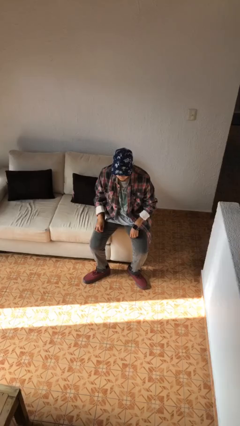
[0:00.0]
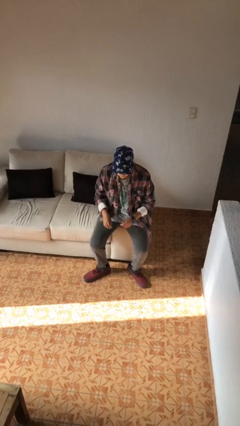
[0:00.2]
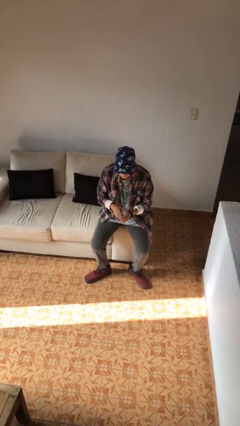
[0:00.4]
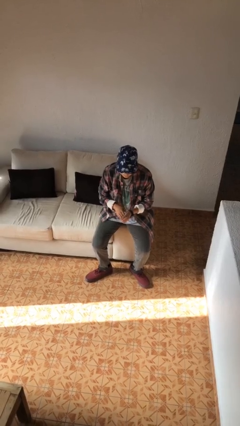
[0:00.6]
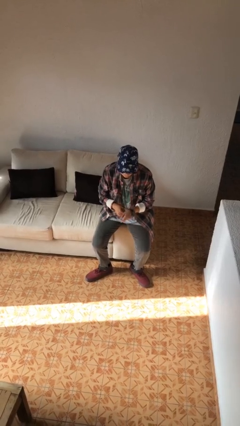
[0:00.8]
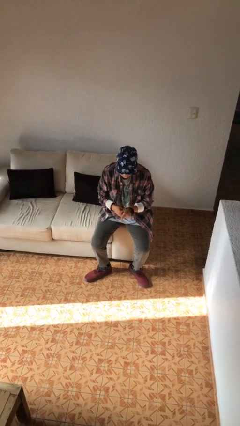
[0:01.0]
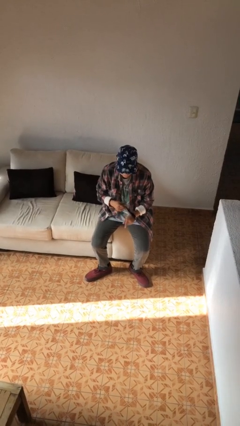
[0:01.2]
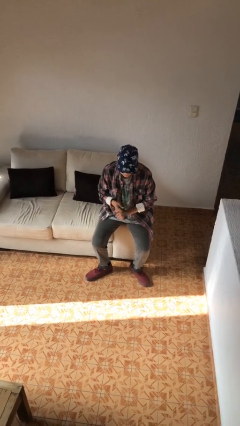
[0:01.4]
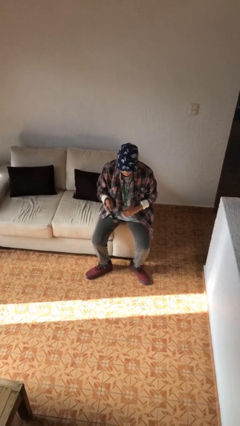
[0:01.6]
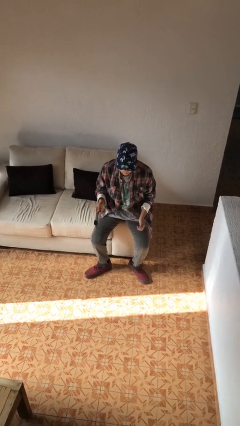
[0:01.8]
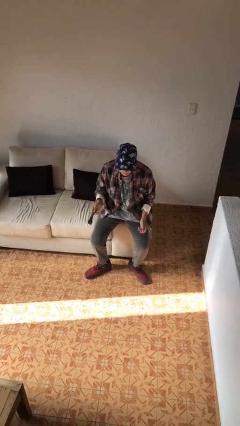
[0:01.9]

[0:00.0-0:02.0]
person takes off wristwatch

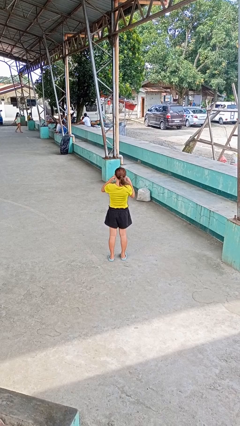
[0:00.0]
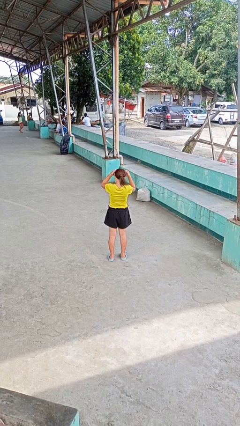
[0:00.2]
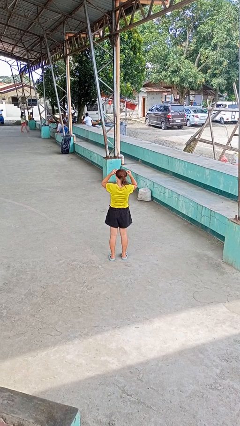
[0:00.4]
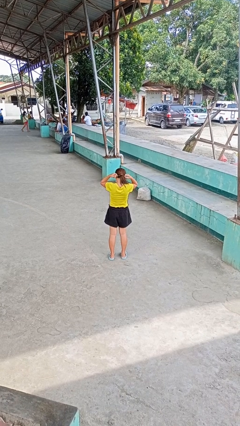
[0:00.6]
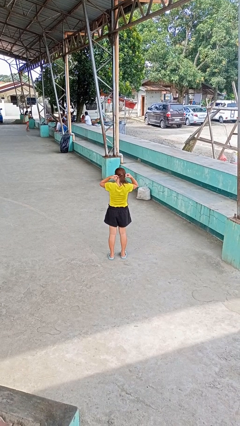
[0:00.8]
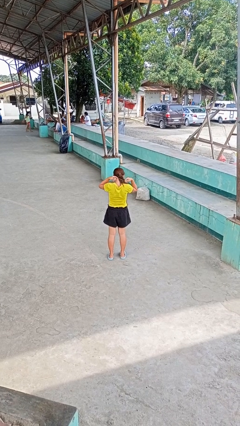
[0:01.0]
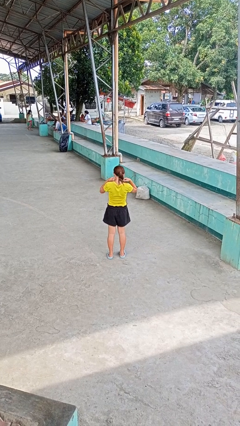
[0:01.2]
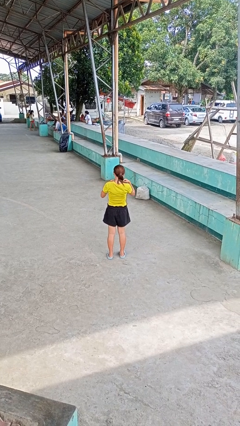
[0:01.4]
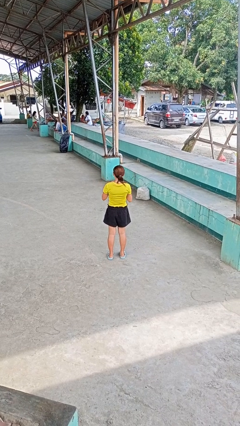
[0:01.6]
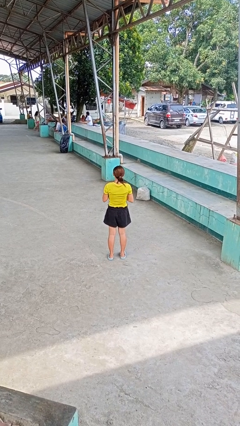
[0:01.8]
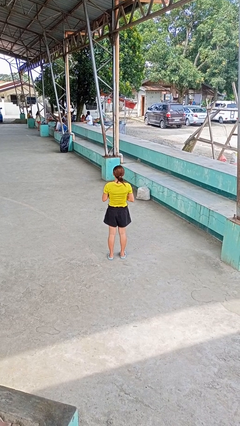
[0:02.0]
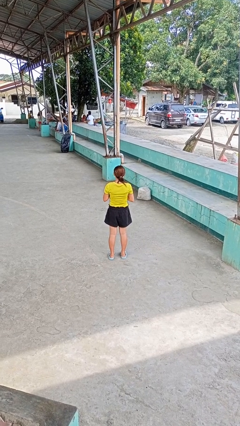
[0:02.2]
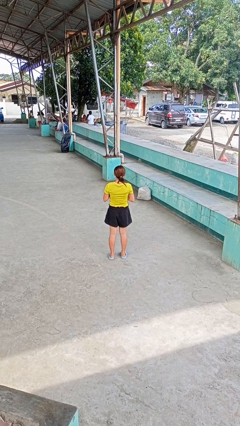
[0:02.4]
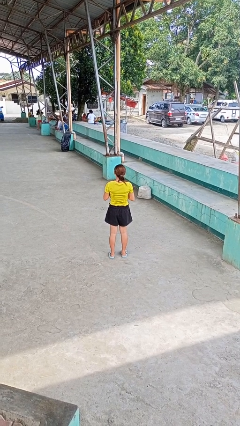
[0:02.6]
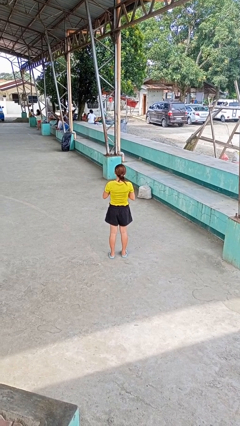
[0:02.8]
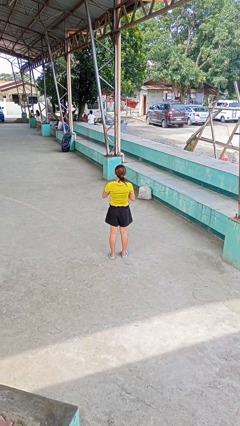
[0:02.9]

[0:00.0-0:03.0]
person puts on necklace

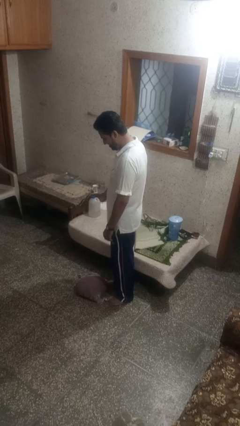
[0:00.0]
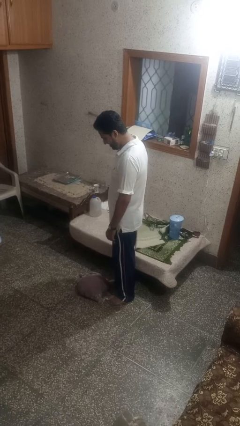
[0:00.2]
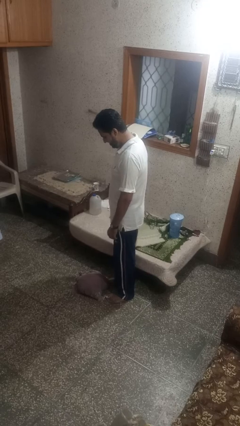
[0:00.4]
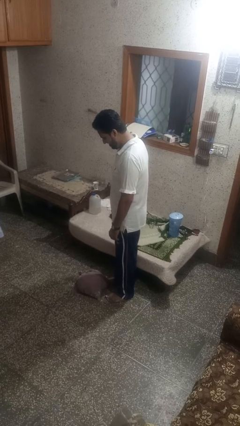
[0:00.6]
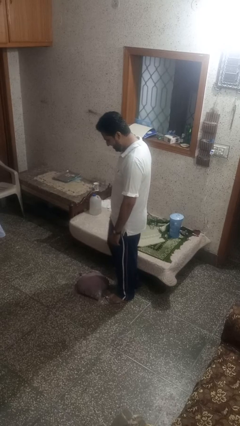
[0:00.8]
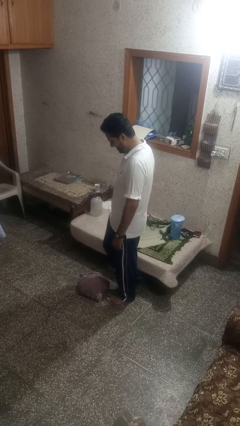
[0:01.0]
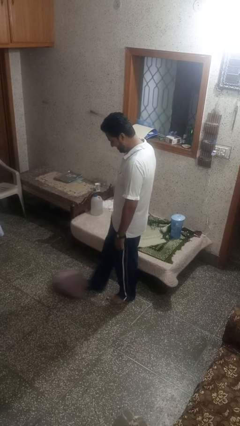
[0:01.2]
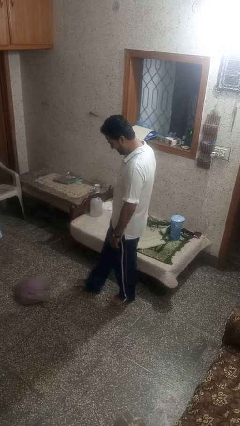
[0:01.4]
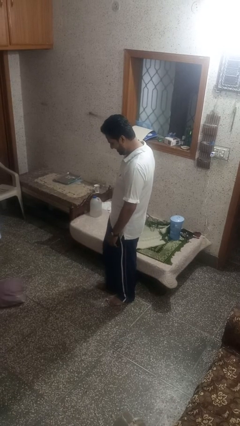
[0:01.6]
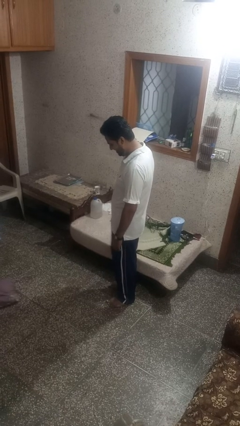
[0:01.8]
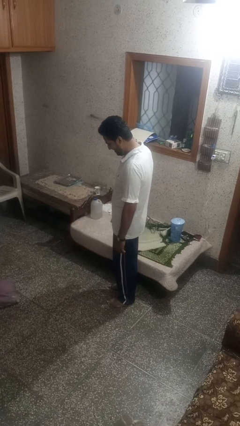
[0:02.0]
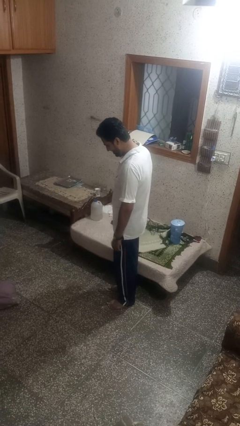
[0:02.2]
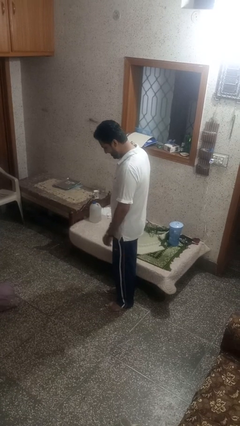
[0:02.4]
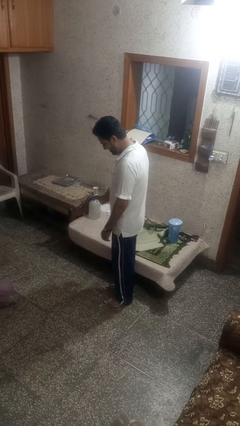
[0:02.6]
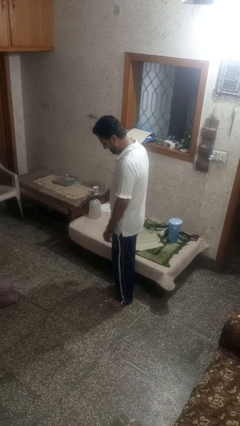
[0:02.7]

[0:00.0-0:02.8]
person kicks object to person

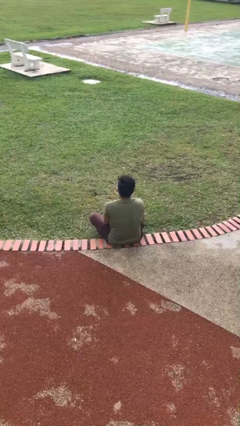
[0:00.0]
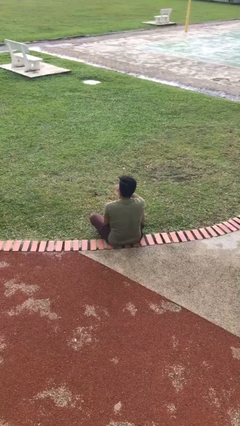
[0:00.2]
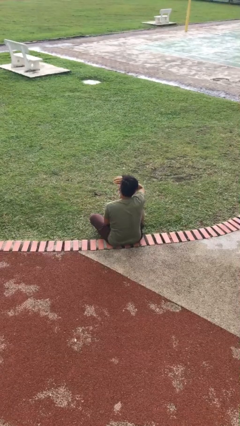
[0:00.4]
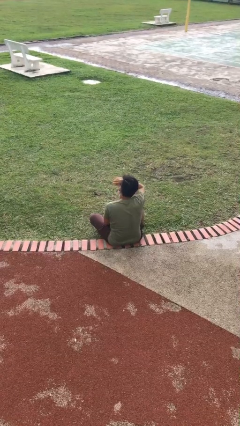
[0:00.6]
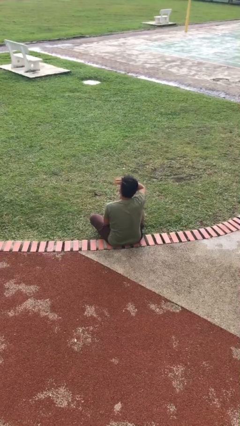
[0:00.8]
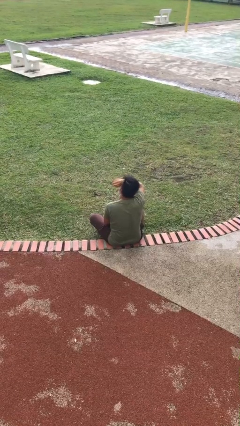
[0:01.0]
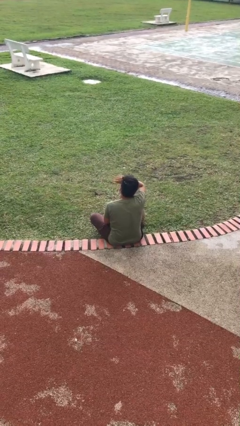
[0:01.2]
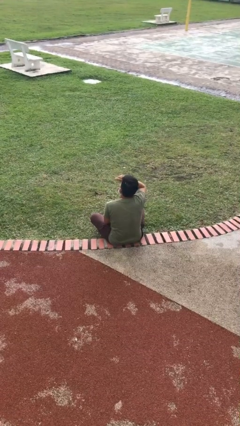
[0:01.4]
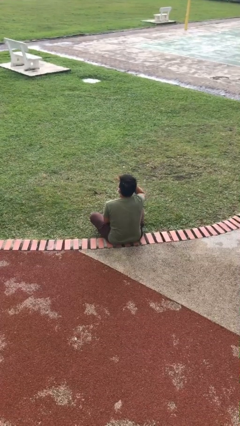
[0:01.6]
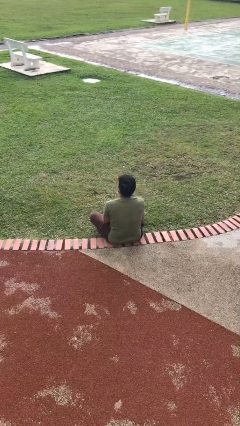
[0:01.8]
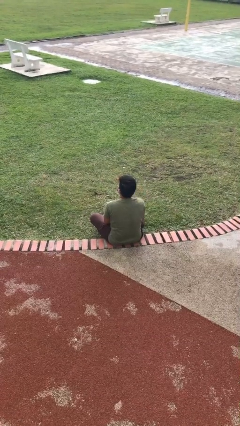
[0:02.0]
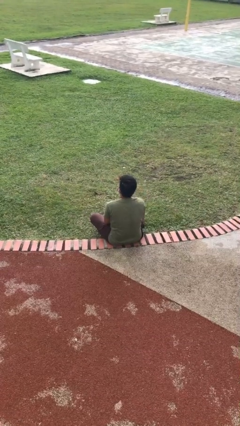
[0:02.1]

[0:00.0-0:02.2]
person rubs eyes

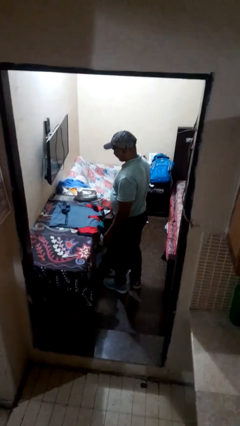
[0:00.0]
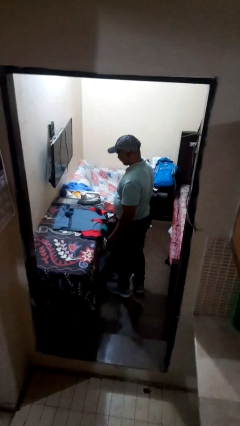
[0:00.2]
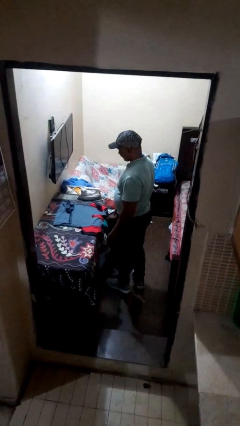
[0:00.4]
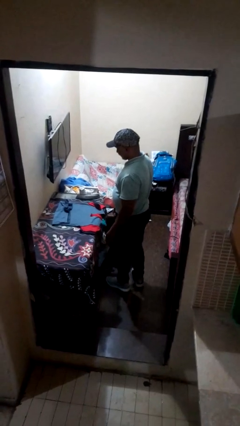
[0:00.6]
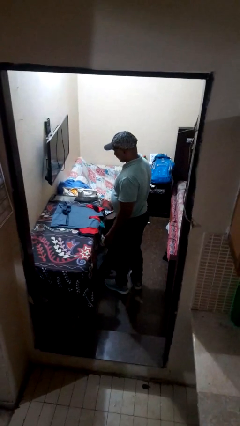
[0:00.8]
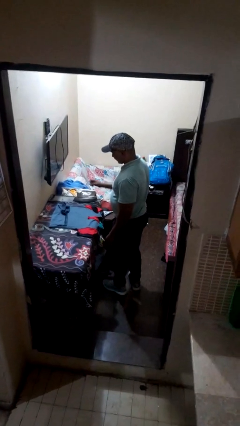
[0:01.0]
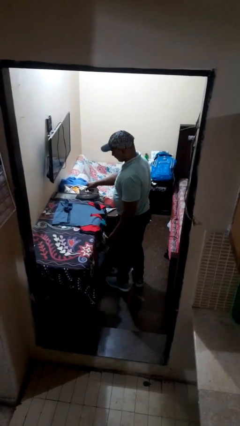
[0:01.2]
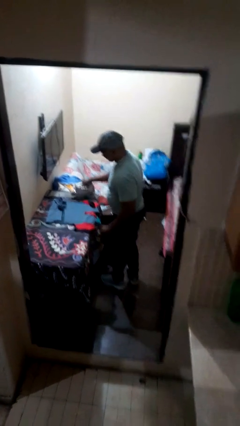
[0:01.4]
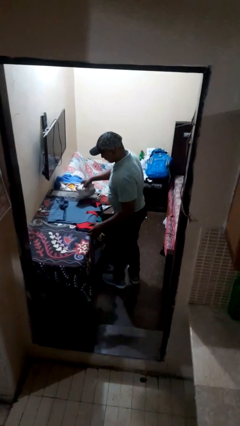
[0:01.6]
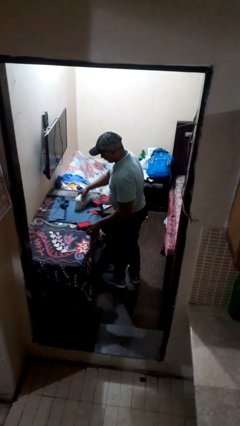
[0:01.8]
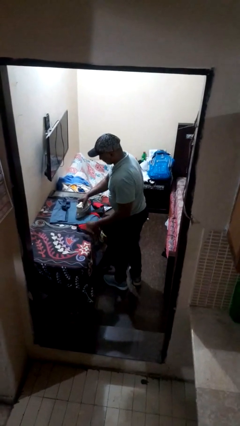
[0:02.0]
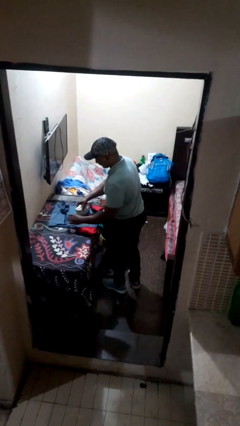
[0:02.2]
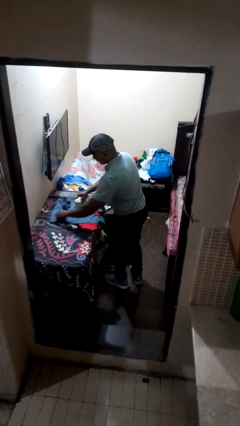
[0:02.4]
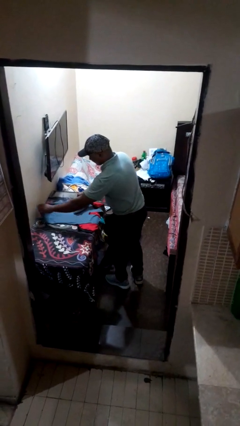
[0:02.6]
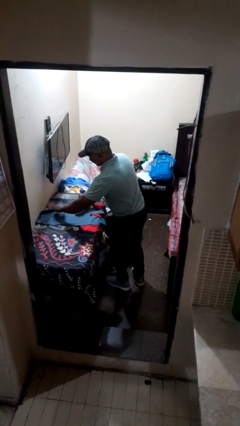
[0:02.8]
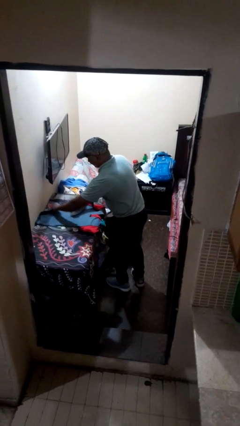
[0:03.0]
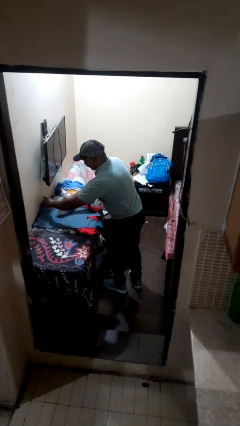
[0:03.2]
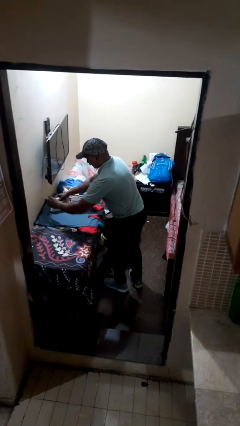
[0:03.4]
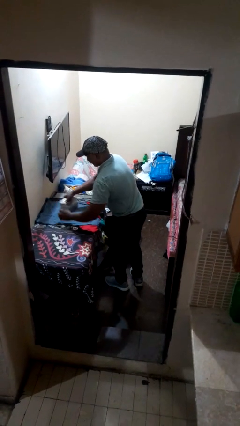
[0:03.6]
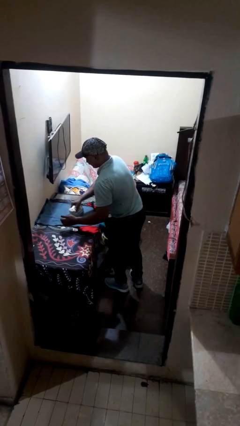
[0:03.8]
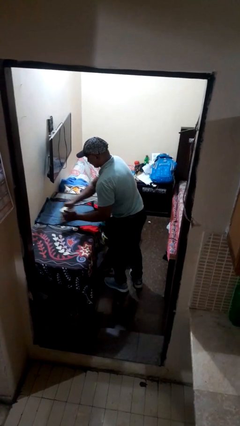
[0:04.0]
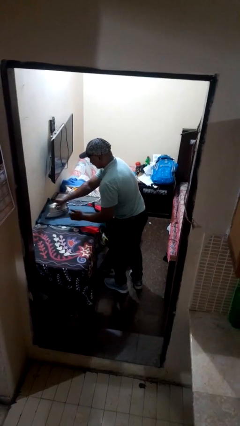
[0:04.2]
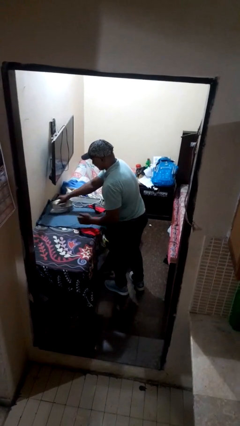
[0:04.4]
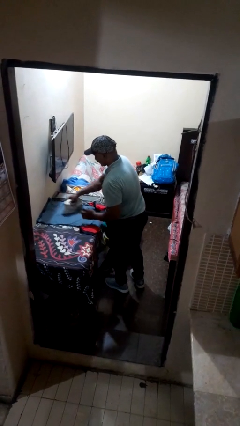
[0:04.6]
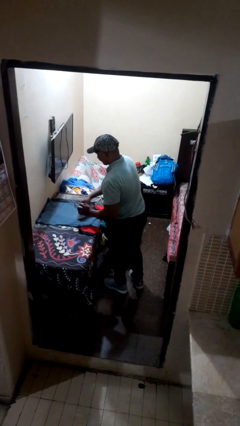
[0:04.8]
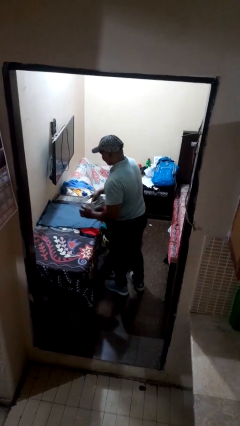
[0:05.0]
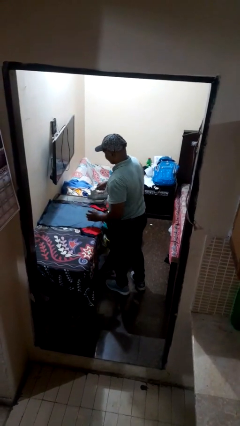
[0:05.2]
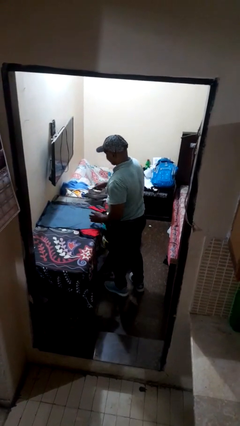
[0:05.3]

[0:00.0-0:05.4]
person irons clothes

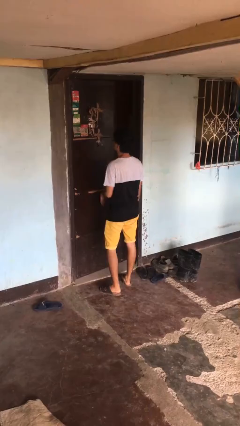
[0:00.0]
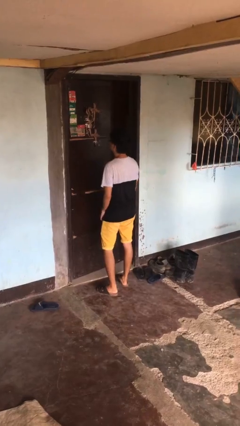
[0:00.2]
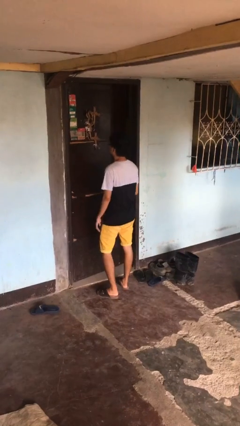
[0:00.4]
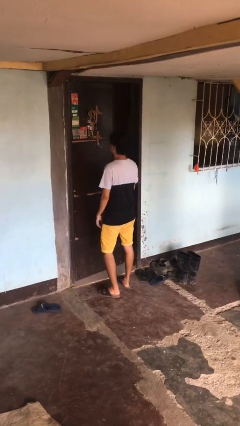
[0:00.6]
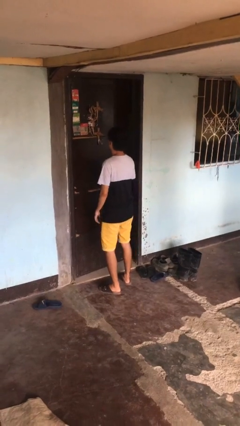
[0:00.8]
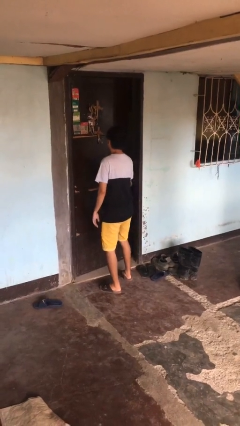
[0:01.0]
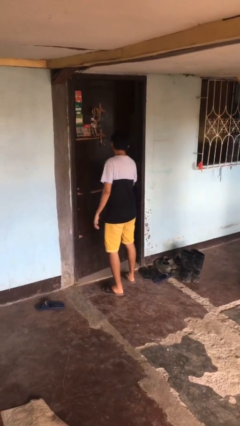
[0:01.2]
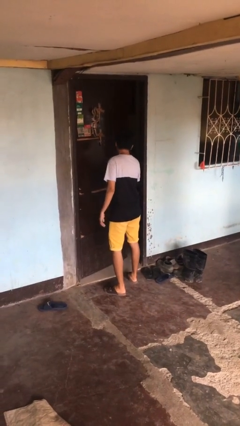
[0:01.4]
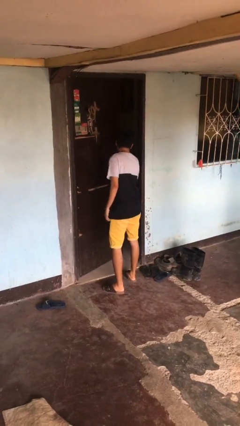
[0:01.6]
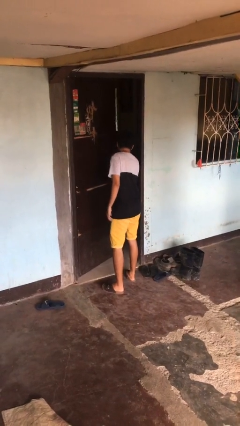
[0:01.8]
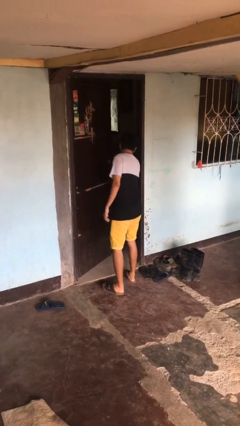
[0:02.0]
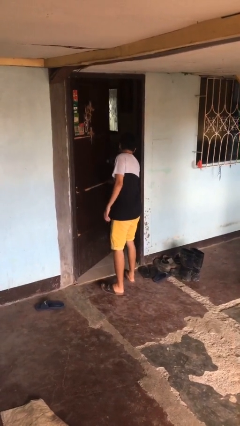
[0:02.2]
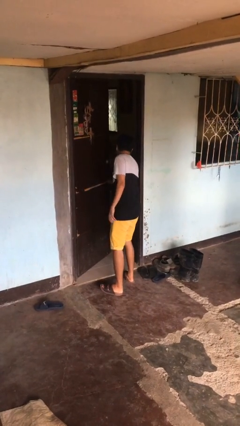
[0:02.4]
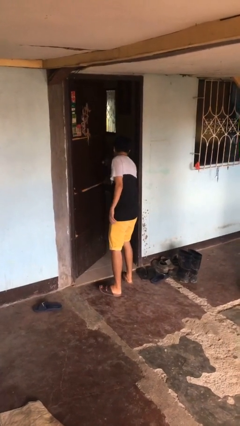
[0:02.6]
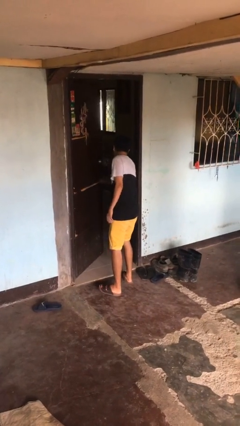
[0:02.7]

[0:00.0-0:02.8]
person opens facility door
